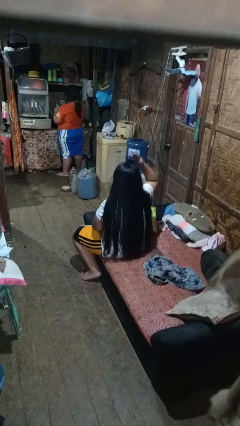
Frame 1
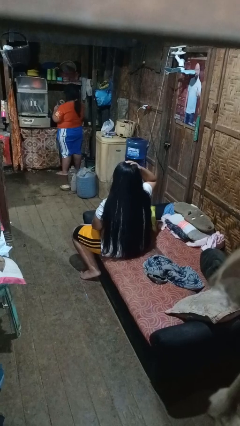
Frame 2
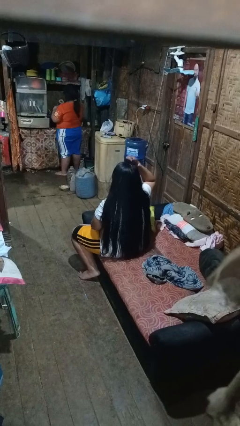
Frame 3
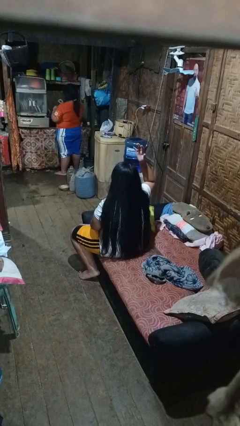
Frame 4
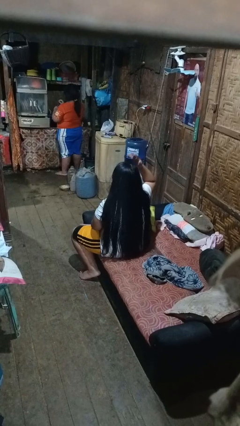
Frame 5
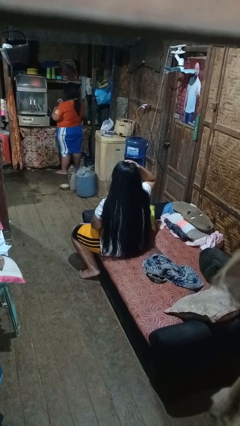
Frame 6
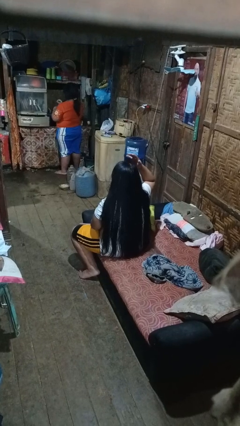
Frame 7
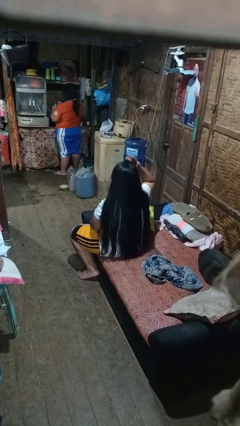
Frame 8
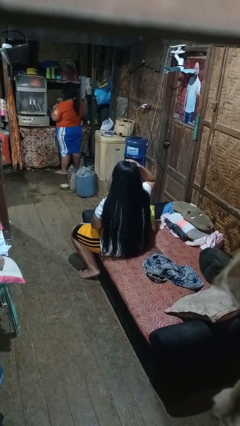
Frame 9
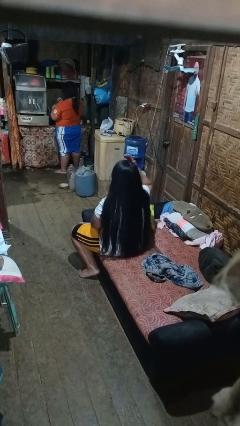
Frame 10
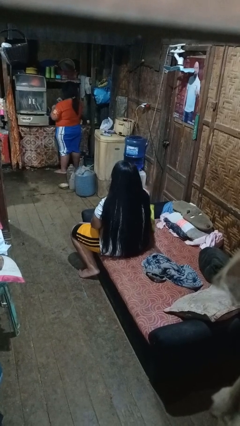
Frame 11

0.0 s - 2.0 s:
person pats head

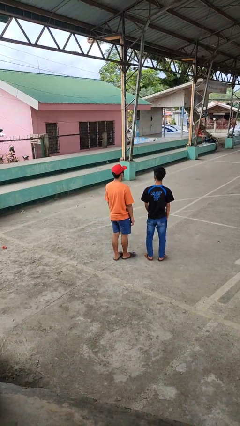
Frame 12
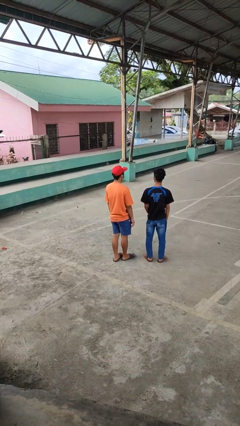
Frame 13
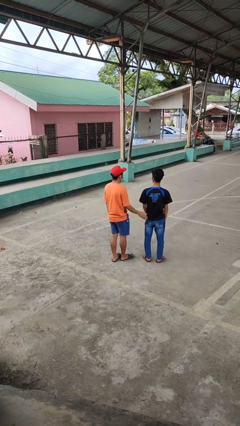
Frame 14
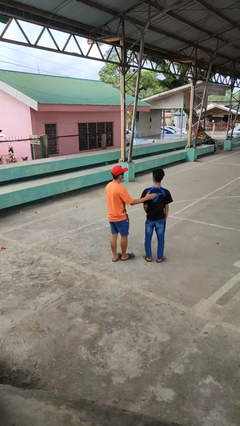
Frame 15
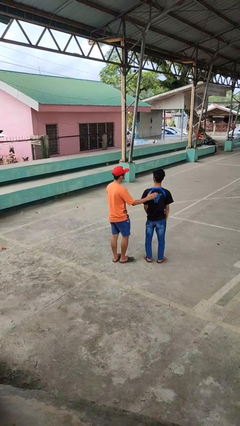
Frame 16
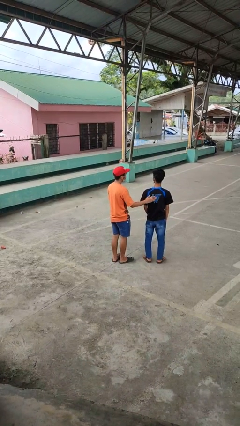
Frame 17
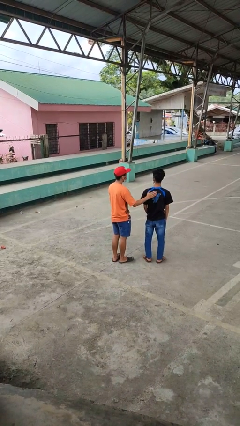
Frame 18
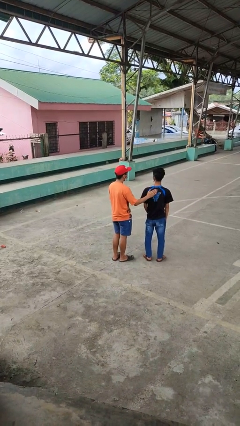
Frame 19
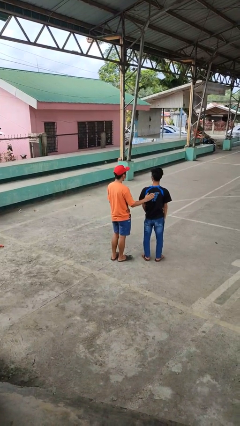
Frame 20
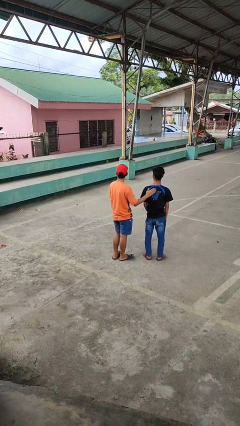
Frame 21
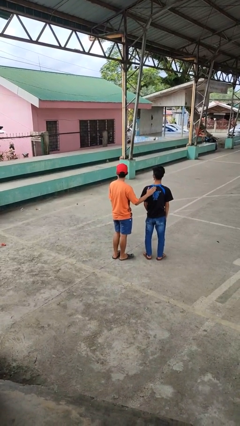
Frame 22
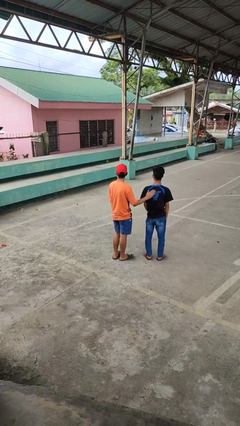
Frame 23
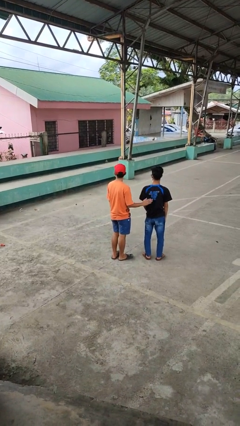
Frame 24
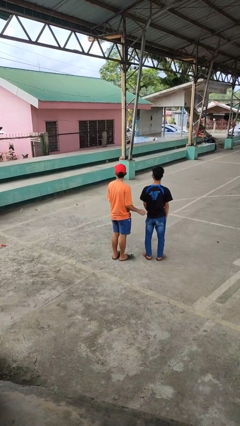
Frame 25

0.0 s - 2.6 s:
person touches back of person

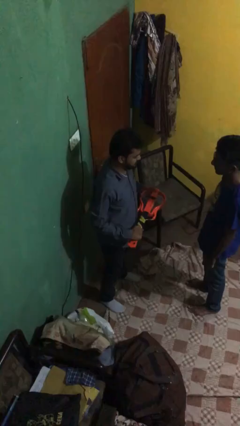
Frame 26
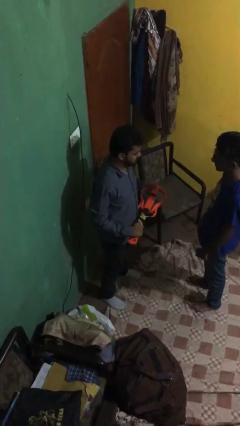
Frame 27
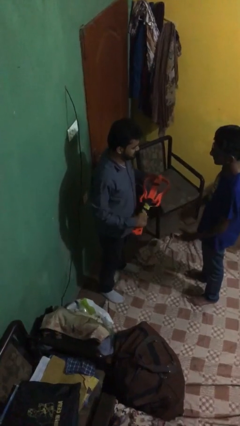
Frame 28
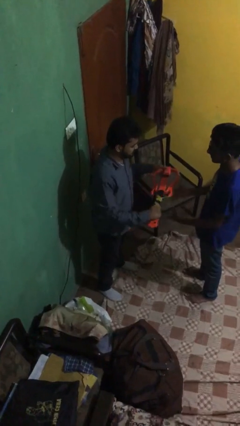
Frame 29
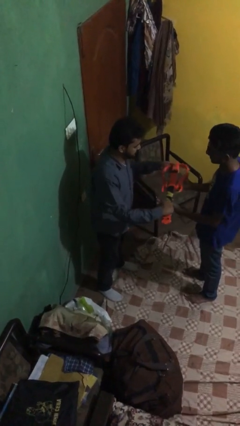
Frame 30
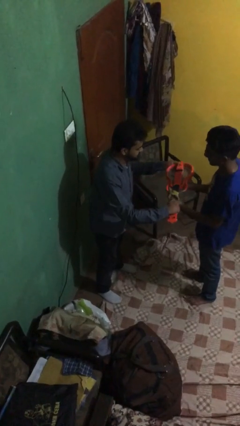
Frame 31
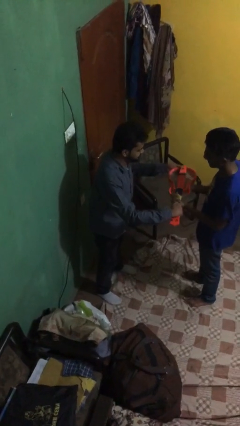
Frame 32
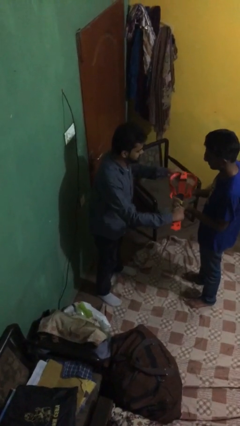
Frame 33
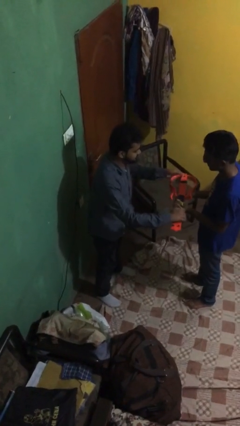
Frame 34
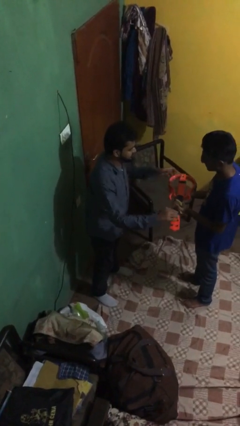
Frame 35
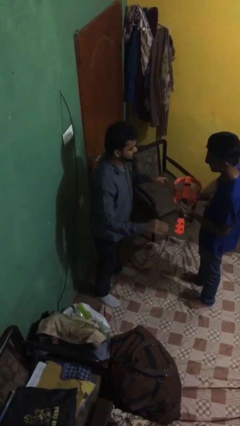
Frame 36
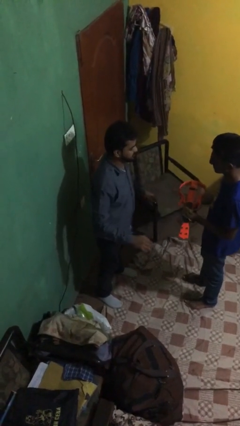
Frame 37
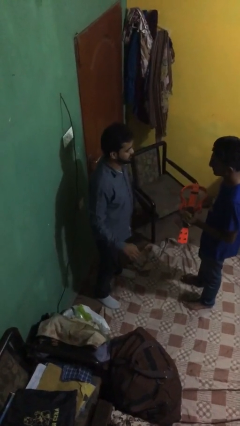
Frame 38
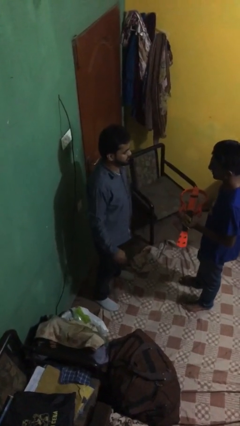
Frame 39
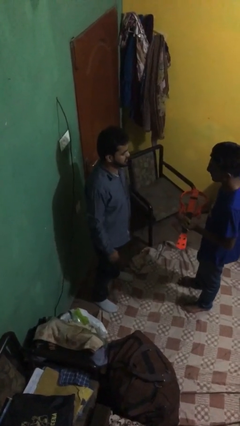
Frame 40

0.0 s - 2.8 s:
person transfers object to person

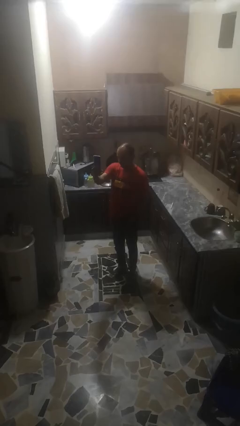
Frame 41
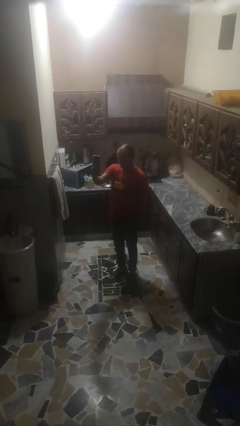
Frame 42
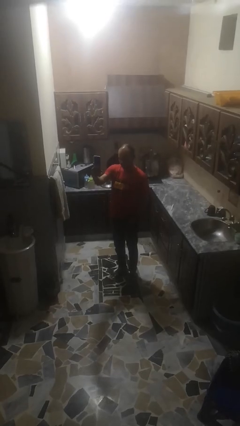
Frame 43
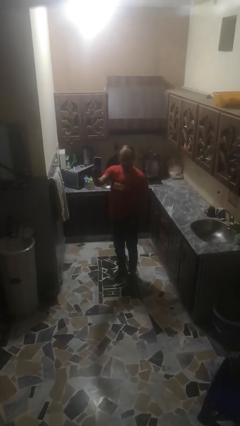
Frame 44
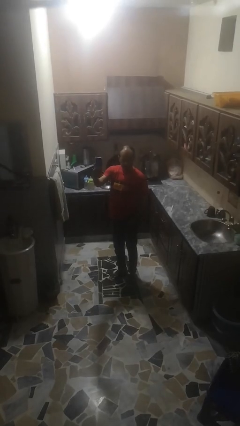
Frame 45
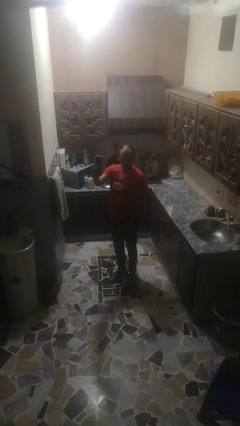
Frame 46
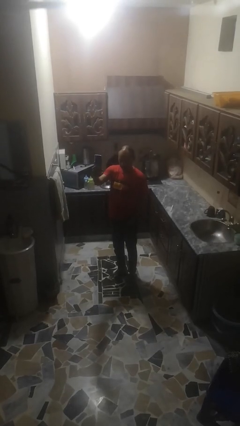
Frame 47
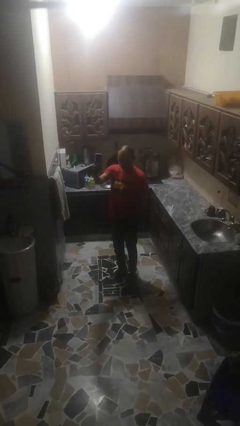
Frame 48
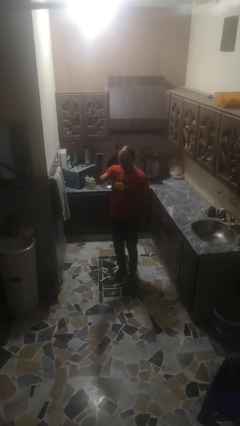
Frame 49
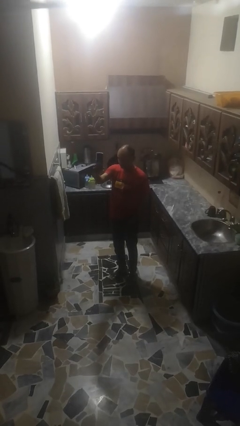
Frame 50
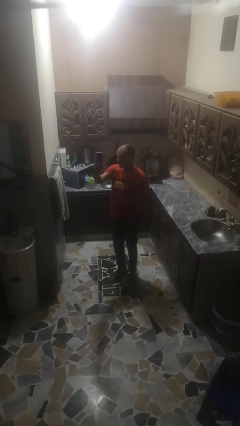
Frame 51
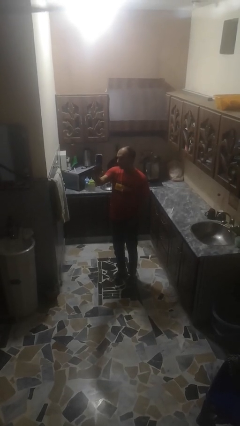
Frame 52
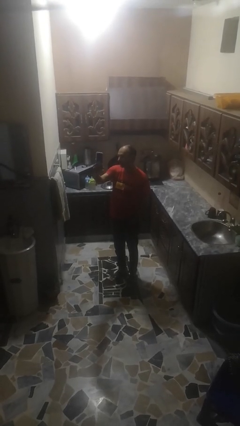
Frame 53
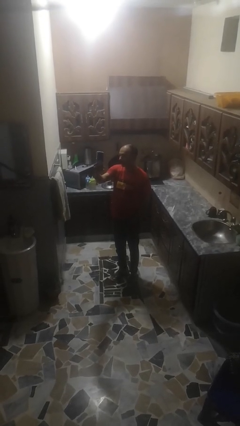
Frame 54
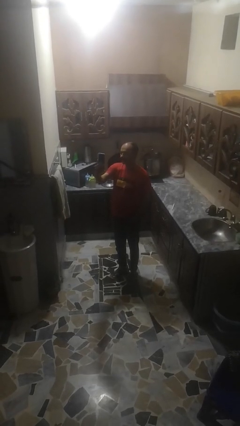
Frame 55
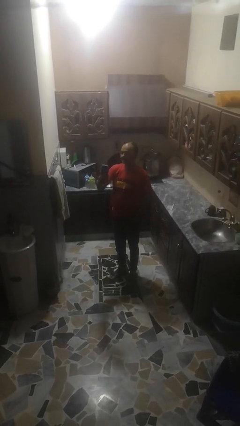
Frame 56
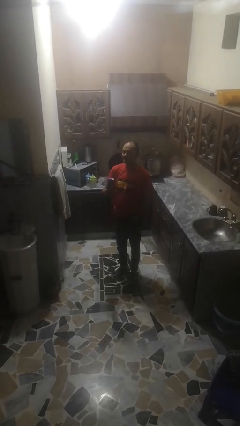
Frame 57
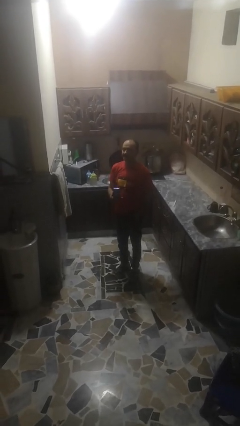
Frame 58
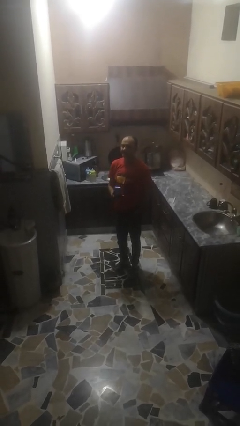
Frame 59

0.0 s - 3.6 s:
person takes selfie

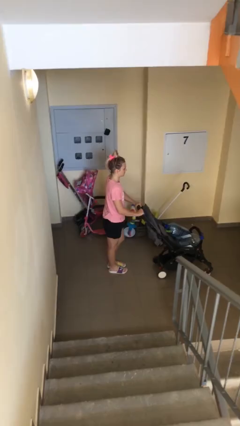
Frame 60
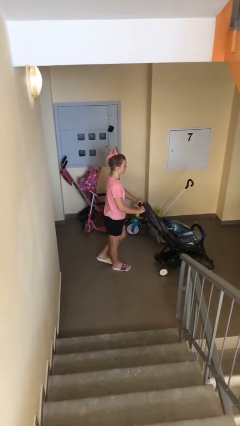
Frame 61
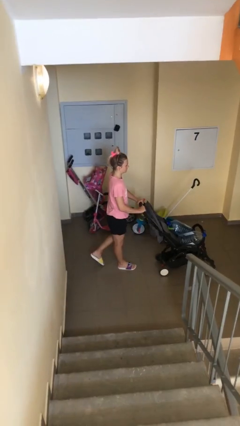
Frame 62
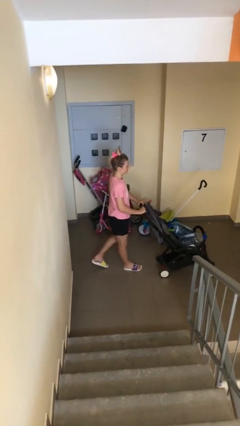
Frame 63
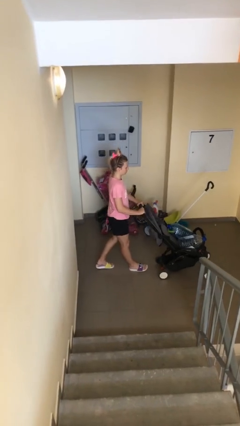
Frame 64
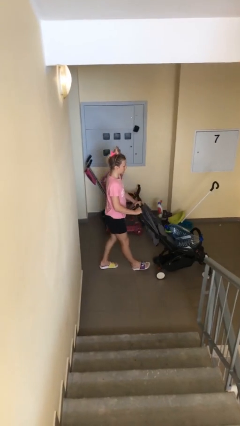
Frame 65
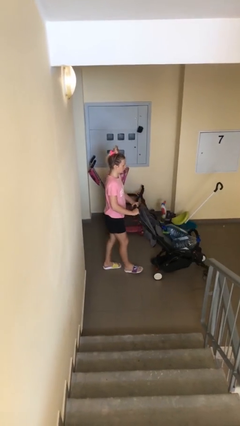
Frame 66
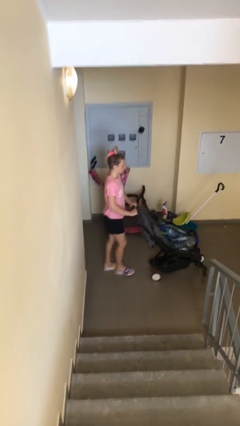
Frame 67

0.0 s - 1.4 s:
person pulls wheeled cart

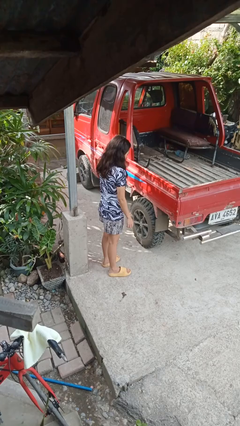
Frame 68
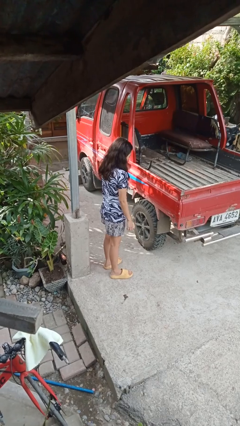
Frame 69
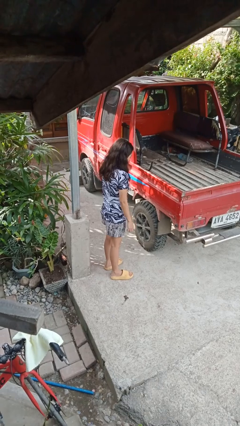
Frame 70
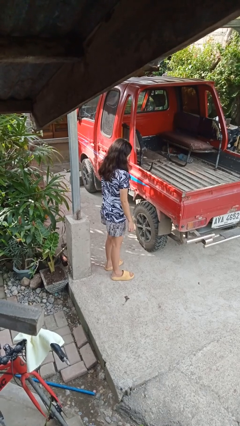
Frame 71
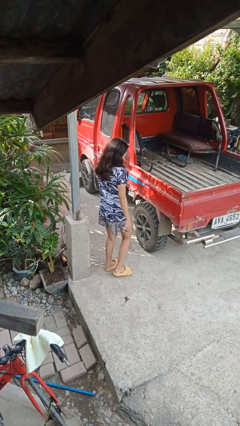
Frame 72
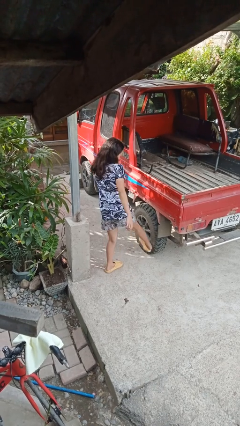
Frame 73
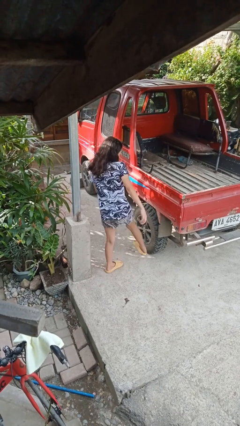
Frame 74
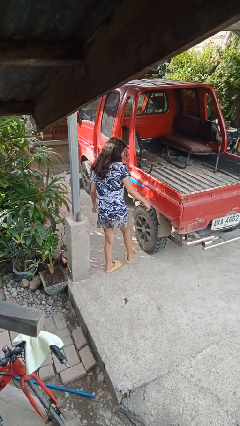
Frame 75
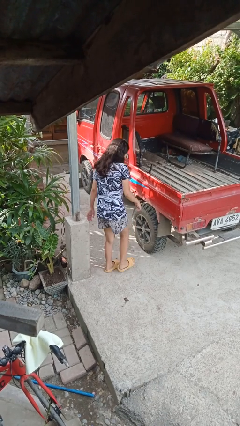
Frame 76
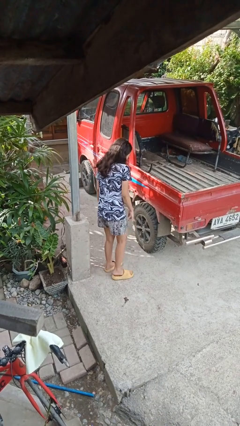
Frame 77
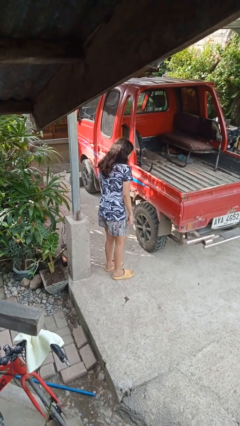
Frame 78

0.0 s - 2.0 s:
person kicks car tires

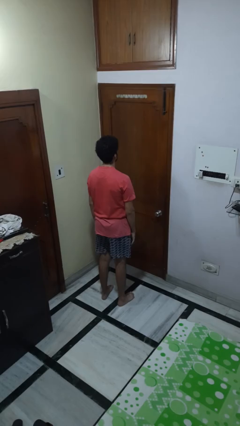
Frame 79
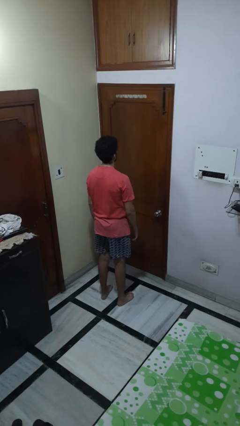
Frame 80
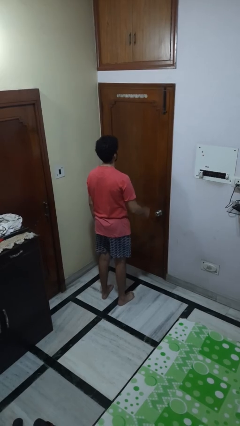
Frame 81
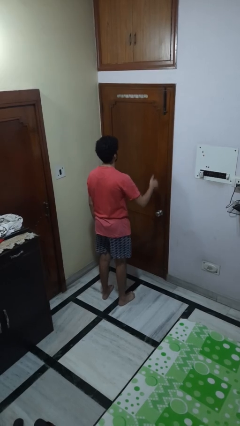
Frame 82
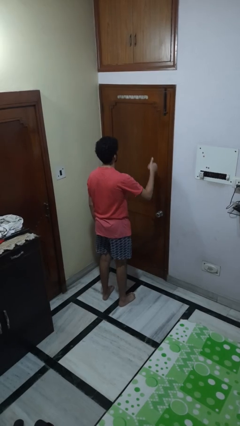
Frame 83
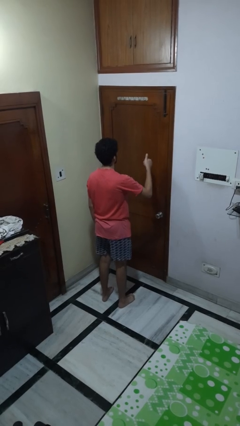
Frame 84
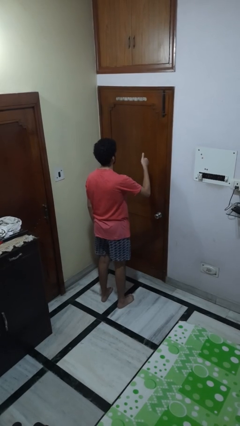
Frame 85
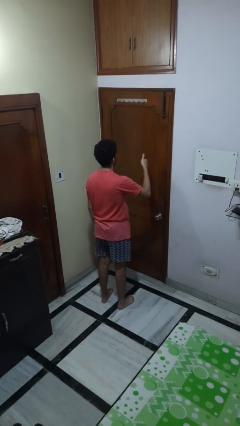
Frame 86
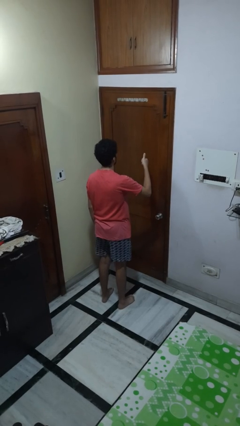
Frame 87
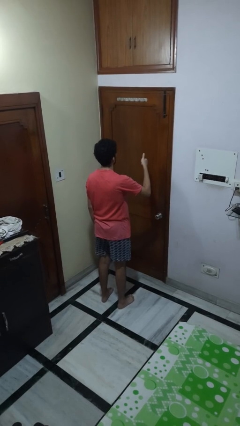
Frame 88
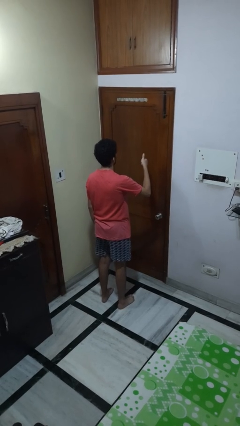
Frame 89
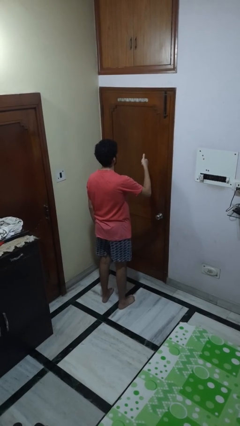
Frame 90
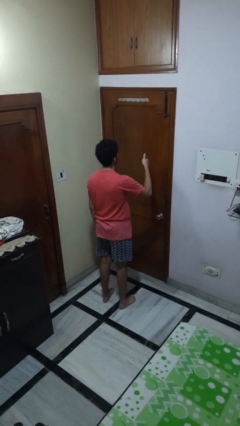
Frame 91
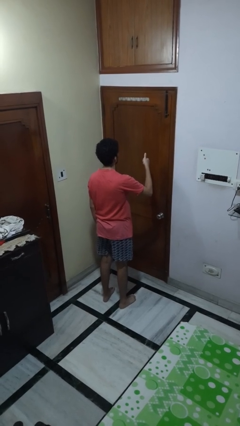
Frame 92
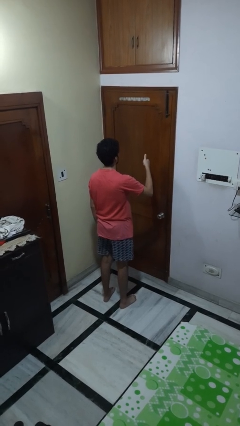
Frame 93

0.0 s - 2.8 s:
person gestures hang loose
